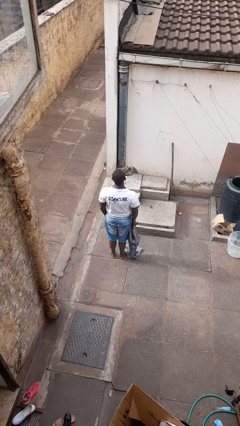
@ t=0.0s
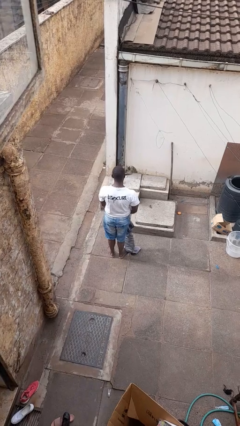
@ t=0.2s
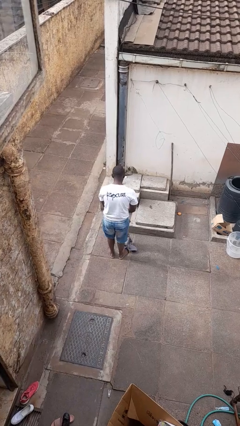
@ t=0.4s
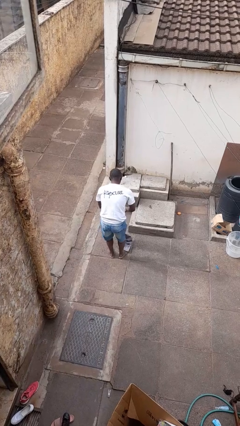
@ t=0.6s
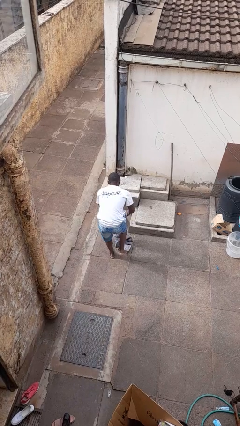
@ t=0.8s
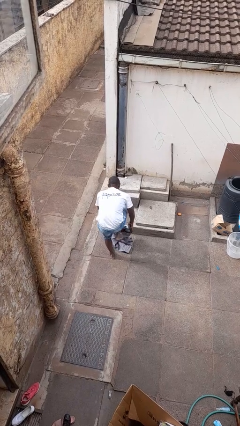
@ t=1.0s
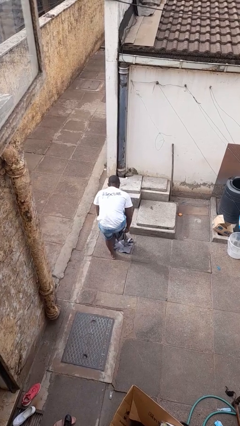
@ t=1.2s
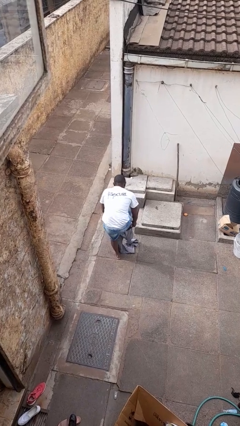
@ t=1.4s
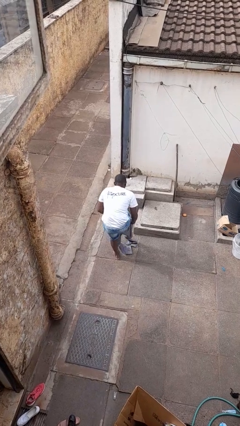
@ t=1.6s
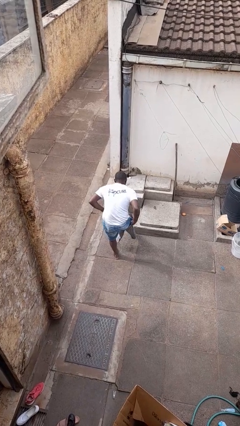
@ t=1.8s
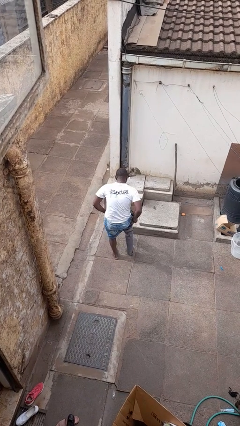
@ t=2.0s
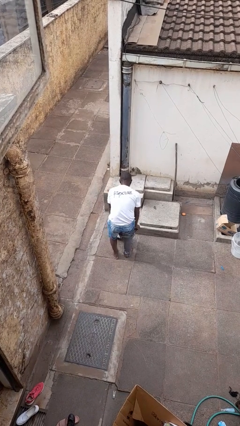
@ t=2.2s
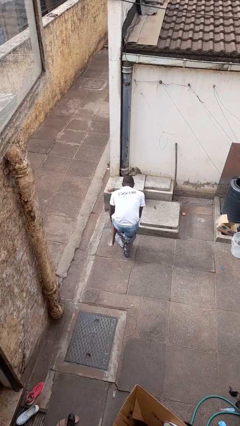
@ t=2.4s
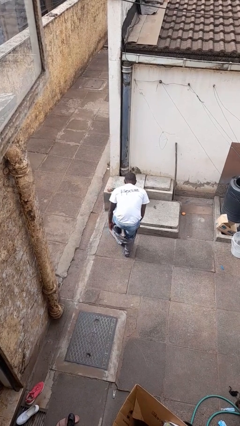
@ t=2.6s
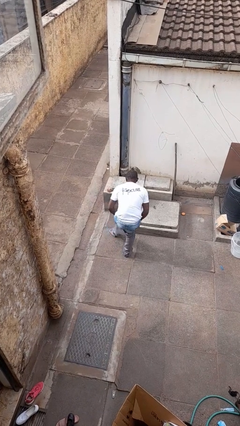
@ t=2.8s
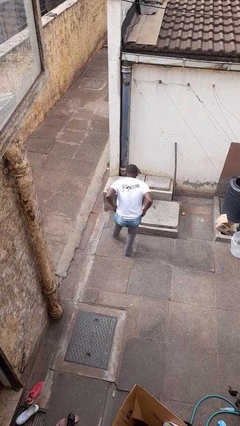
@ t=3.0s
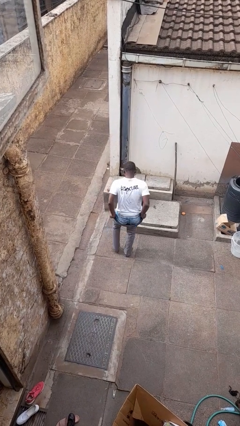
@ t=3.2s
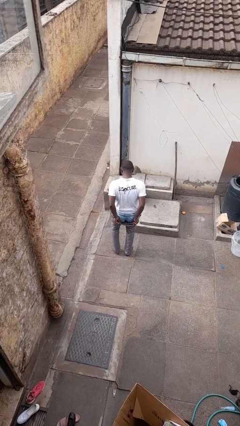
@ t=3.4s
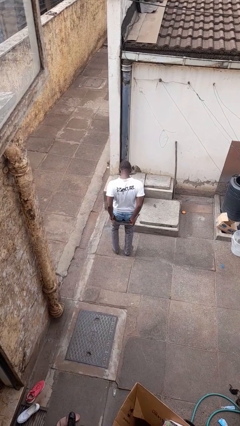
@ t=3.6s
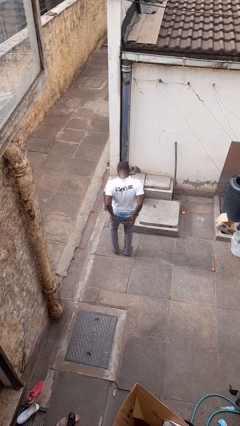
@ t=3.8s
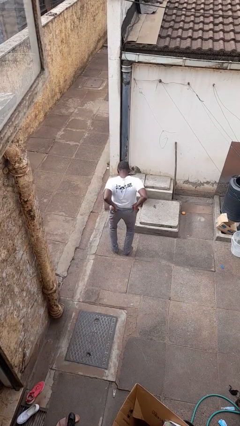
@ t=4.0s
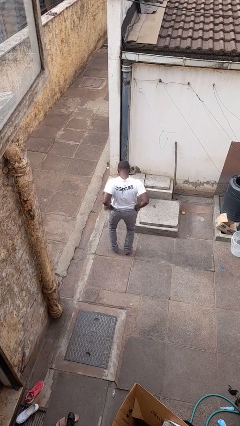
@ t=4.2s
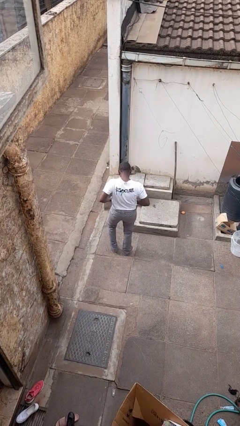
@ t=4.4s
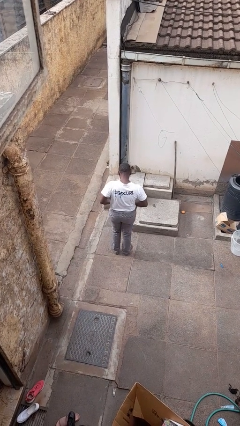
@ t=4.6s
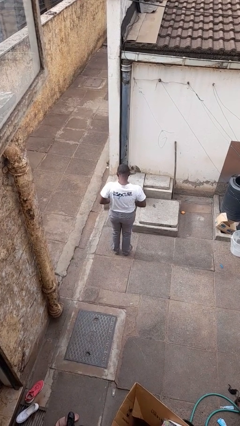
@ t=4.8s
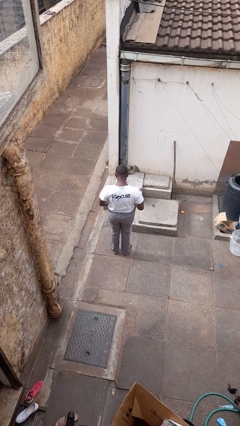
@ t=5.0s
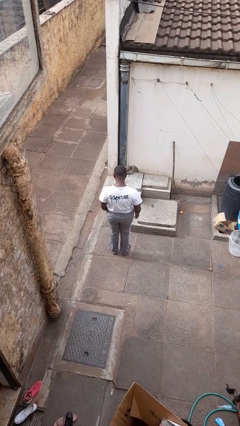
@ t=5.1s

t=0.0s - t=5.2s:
person puts on pants

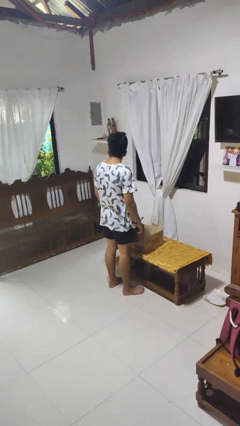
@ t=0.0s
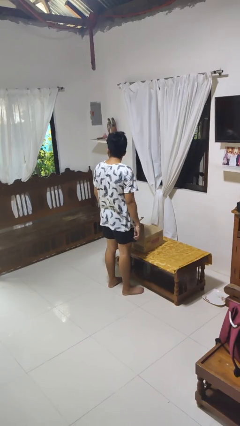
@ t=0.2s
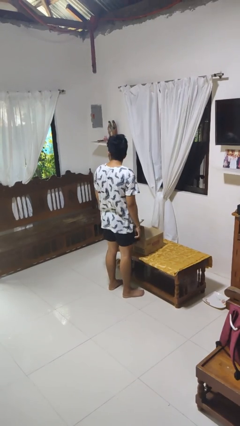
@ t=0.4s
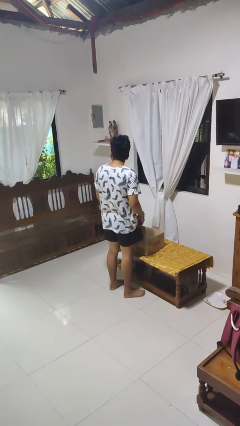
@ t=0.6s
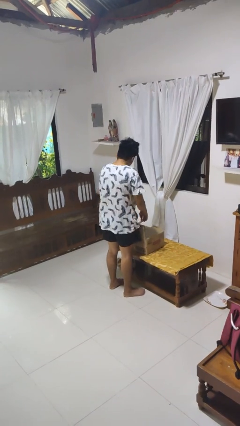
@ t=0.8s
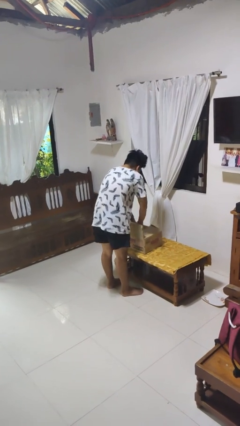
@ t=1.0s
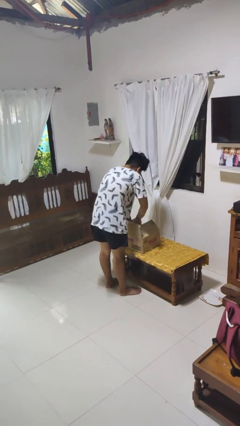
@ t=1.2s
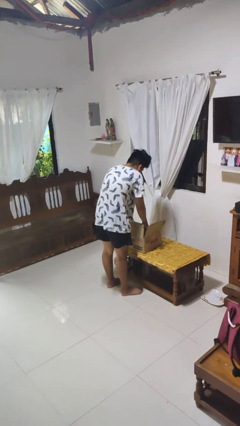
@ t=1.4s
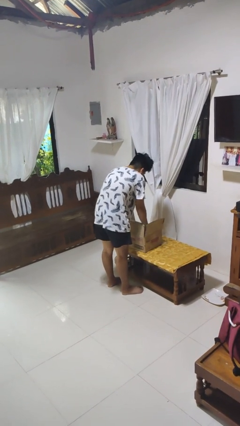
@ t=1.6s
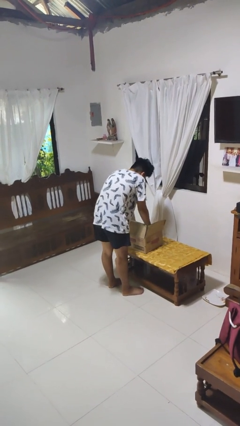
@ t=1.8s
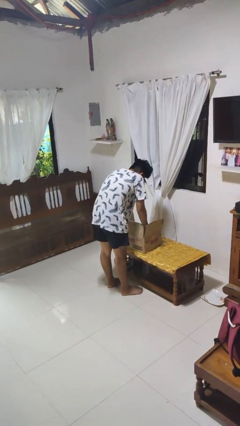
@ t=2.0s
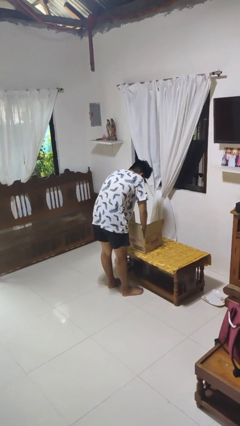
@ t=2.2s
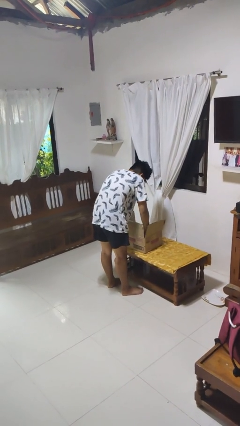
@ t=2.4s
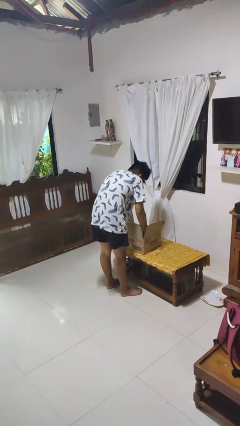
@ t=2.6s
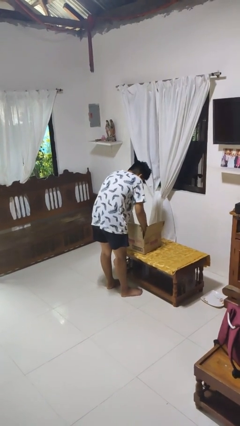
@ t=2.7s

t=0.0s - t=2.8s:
person searches in box

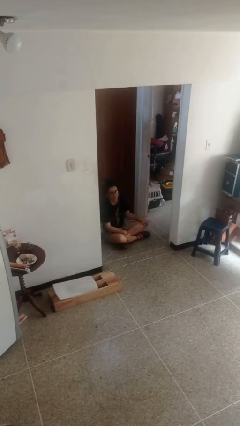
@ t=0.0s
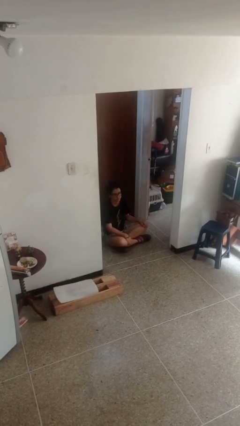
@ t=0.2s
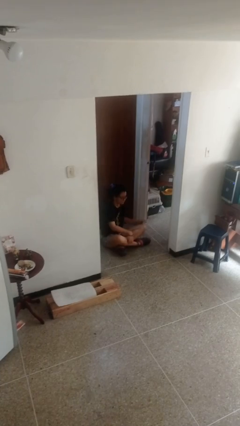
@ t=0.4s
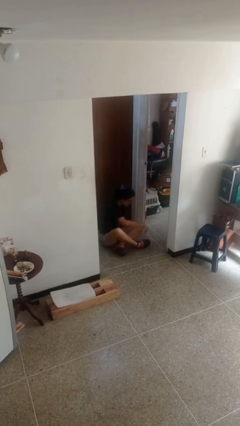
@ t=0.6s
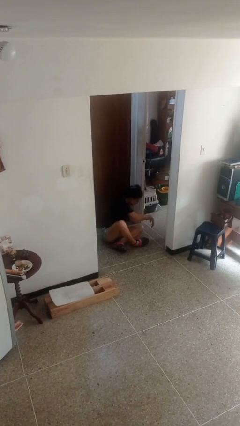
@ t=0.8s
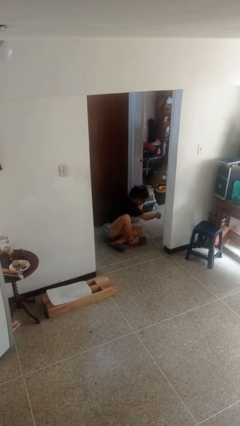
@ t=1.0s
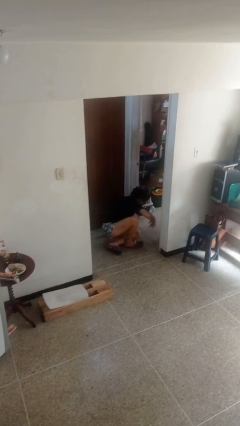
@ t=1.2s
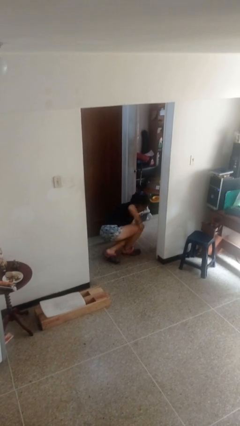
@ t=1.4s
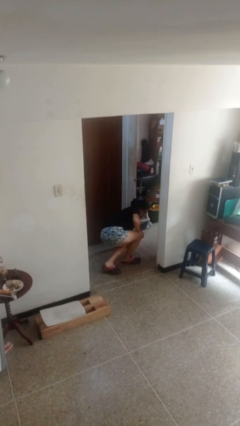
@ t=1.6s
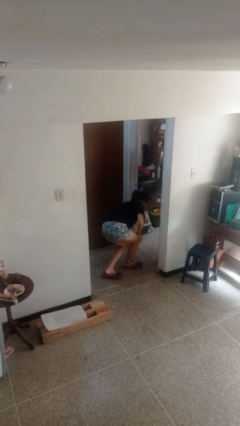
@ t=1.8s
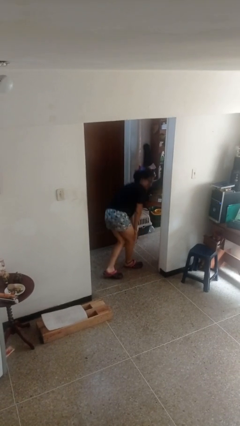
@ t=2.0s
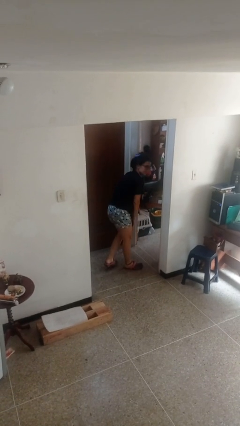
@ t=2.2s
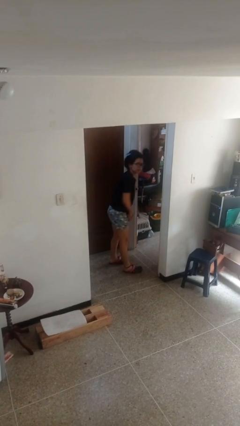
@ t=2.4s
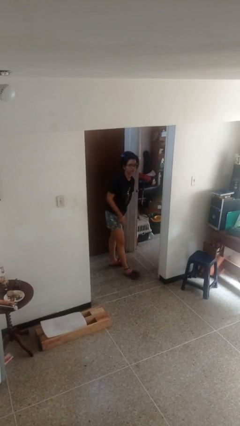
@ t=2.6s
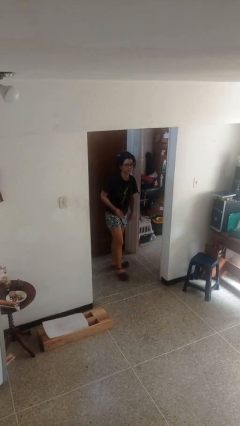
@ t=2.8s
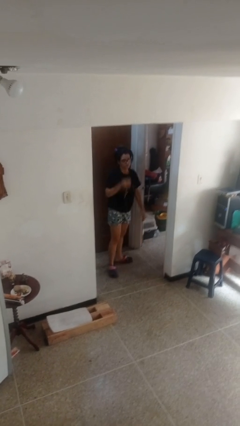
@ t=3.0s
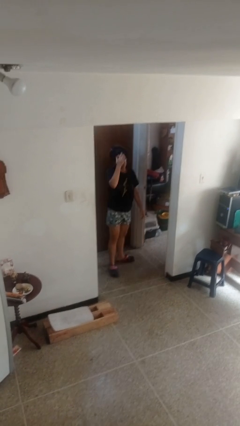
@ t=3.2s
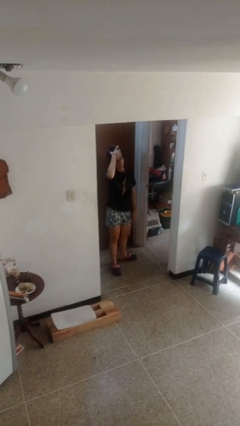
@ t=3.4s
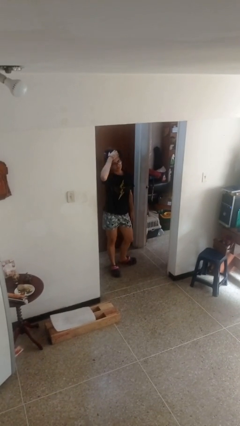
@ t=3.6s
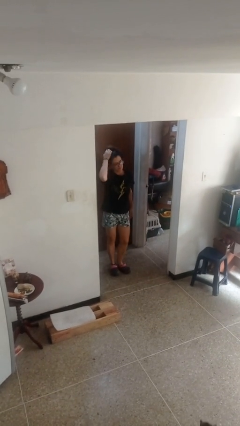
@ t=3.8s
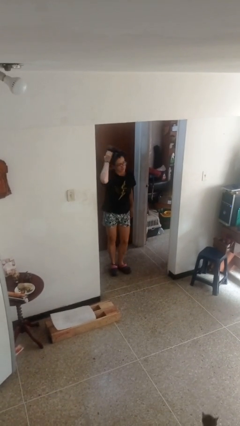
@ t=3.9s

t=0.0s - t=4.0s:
person stands up from floor

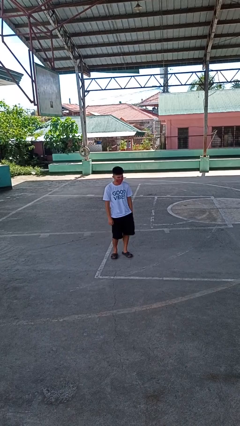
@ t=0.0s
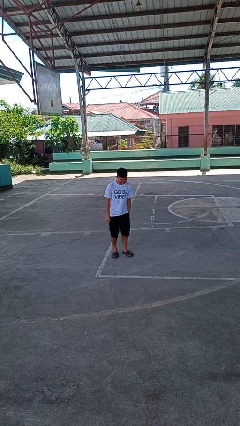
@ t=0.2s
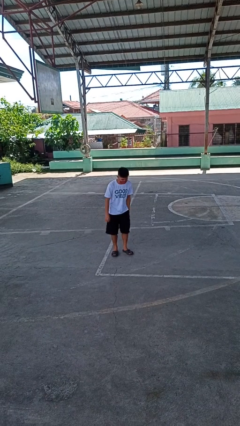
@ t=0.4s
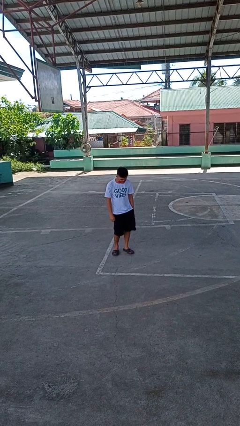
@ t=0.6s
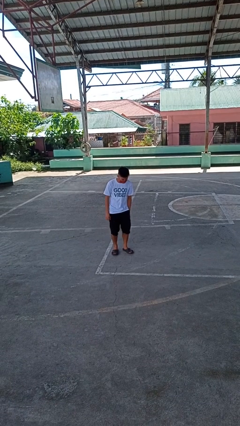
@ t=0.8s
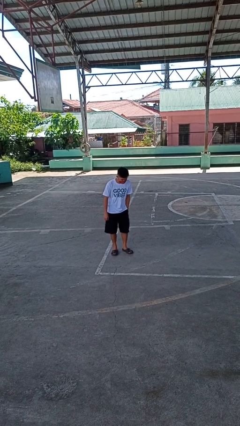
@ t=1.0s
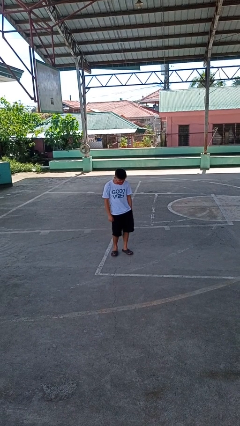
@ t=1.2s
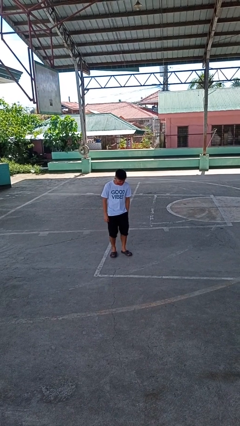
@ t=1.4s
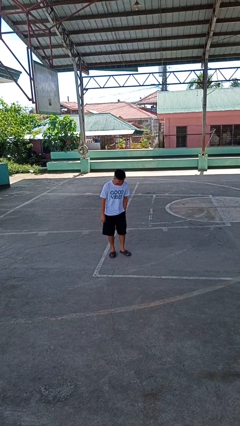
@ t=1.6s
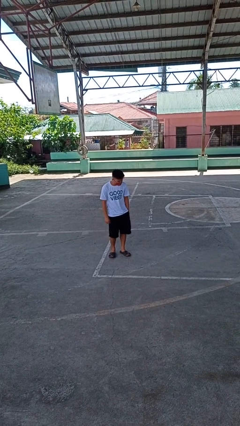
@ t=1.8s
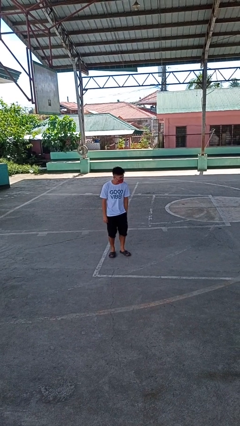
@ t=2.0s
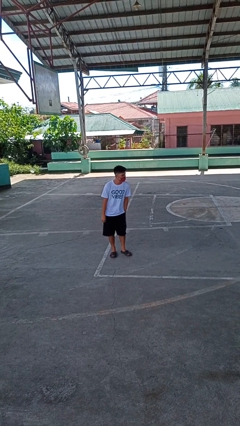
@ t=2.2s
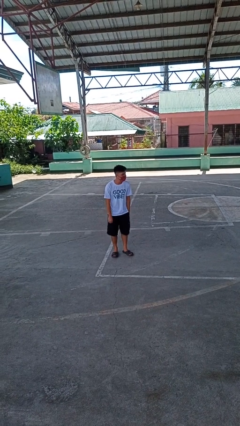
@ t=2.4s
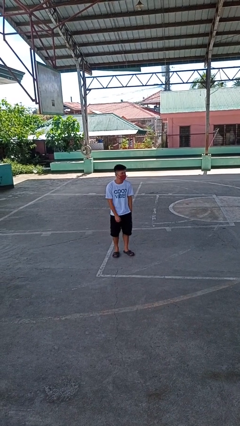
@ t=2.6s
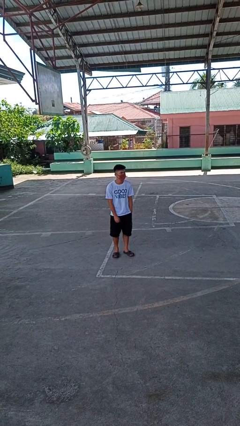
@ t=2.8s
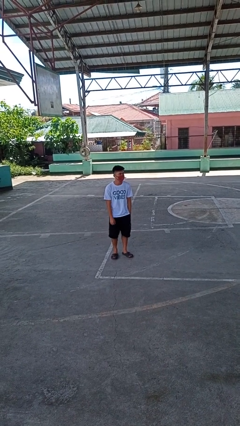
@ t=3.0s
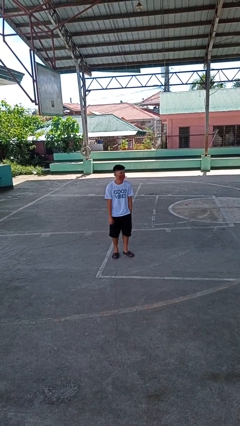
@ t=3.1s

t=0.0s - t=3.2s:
person wiggles hips

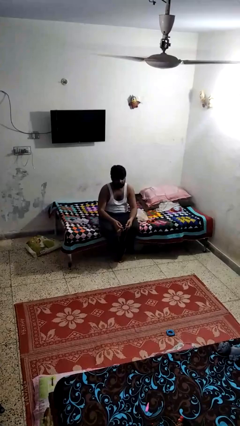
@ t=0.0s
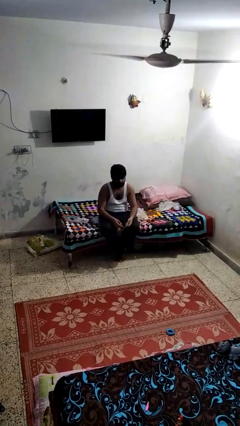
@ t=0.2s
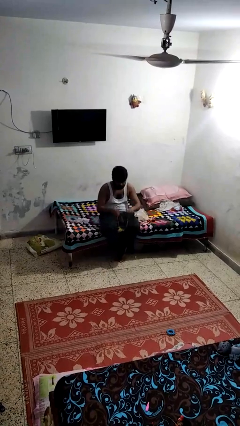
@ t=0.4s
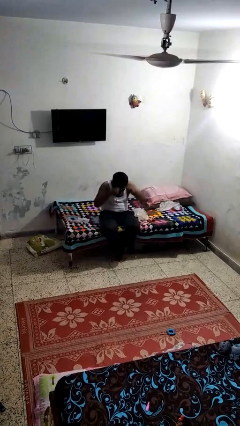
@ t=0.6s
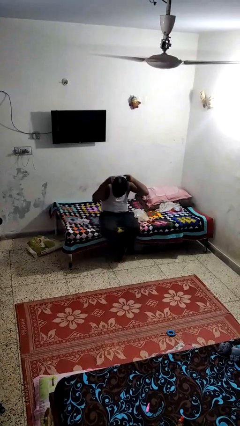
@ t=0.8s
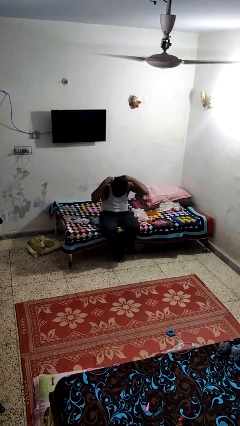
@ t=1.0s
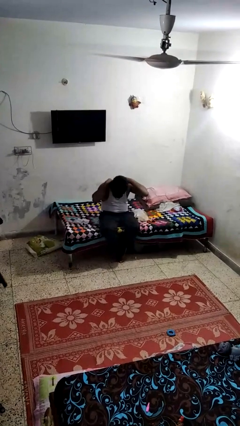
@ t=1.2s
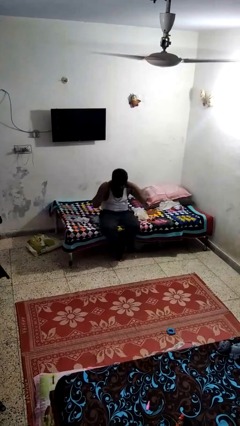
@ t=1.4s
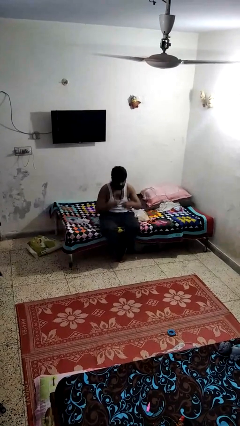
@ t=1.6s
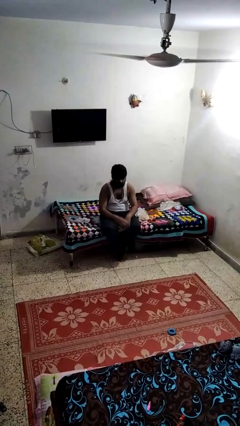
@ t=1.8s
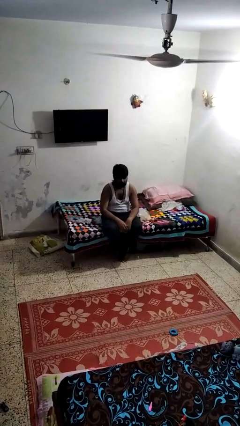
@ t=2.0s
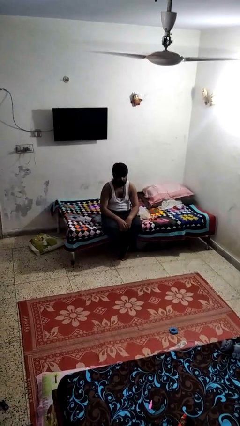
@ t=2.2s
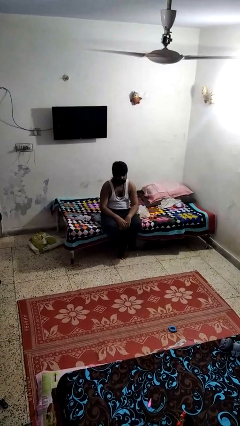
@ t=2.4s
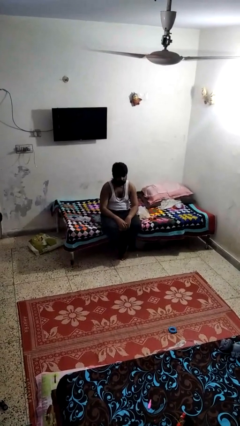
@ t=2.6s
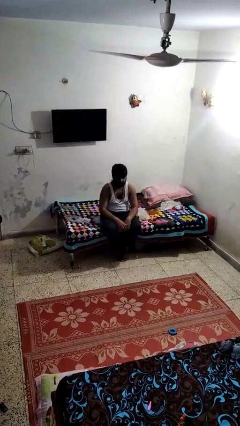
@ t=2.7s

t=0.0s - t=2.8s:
person puts on necklace
